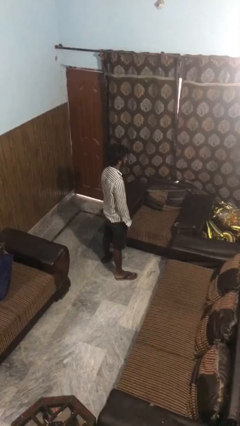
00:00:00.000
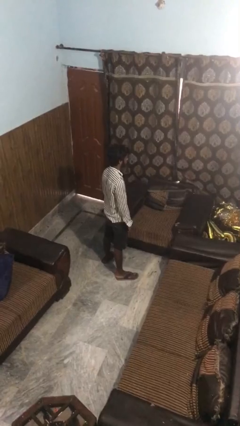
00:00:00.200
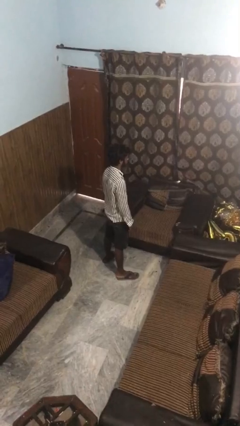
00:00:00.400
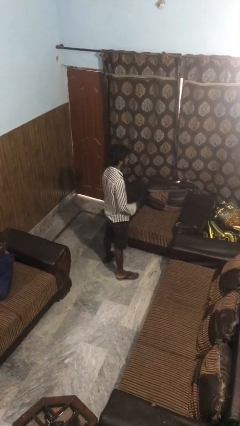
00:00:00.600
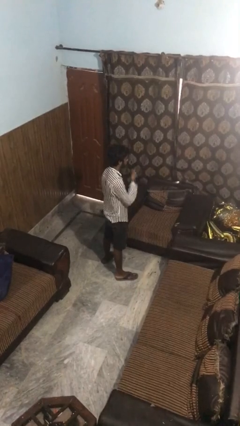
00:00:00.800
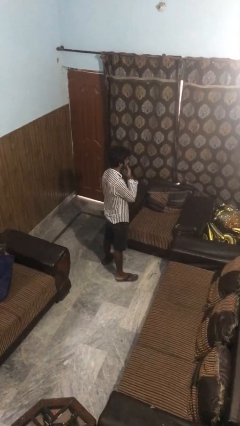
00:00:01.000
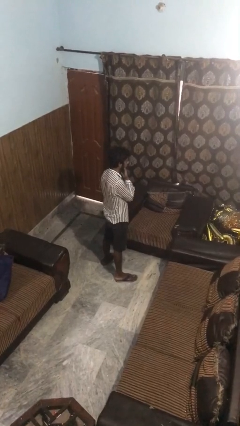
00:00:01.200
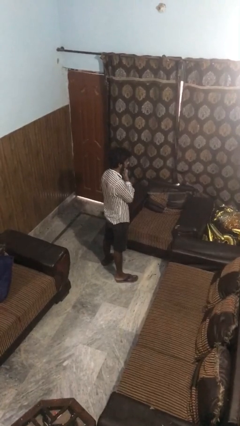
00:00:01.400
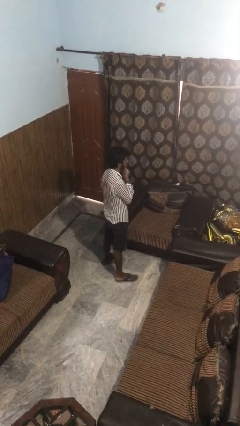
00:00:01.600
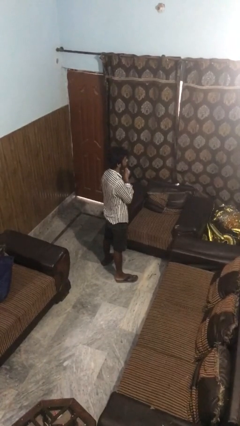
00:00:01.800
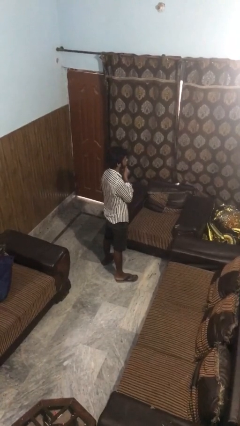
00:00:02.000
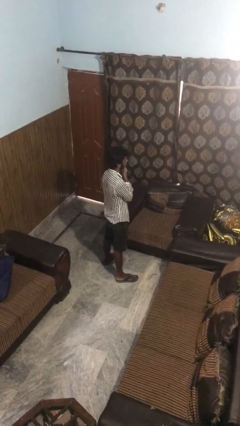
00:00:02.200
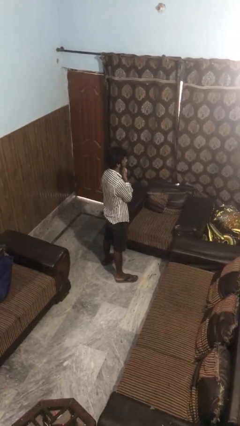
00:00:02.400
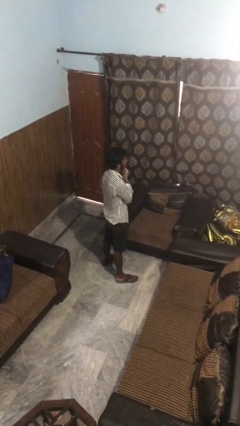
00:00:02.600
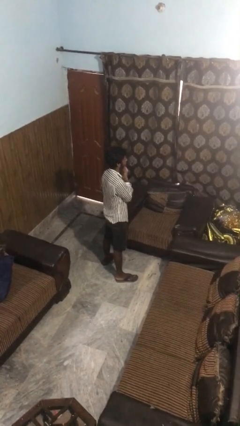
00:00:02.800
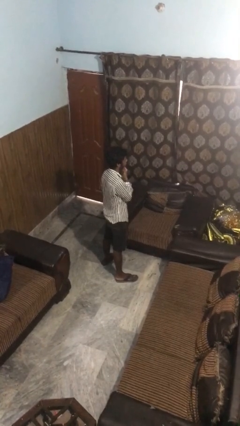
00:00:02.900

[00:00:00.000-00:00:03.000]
person strokes chin

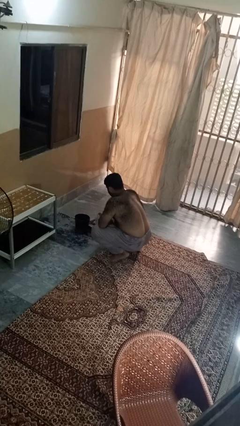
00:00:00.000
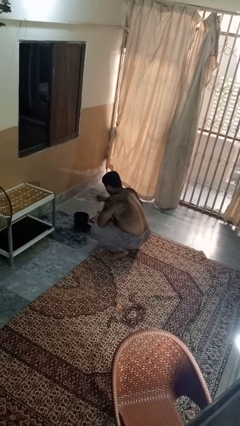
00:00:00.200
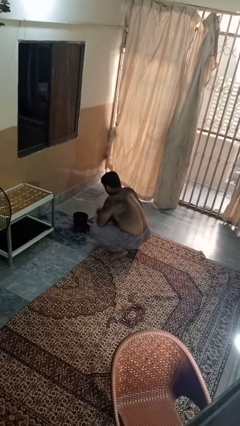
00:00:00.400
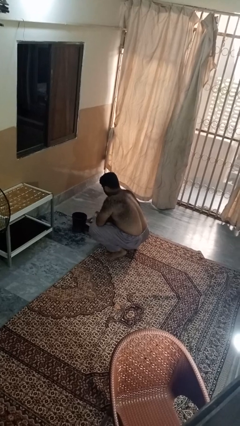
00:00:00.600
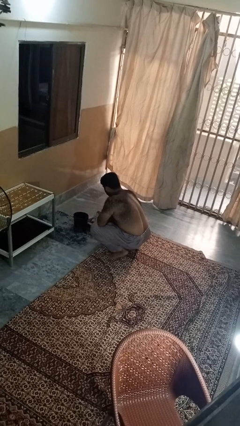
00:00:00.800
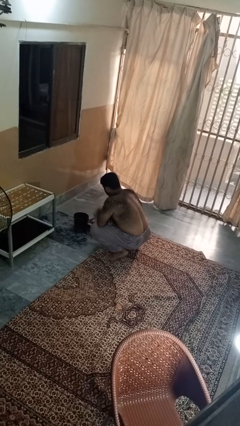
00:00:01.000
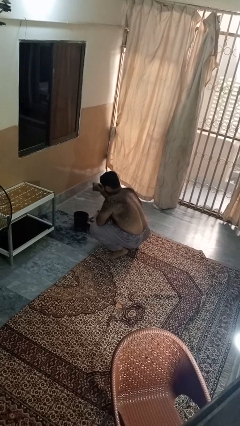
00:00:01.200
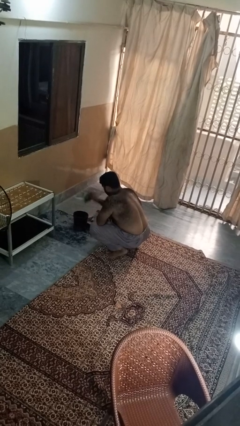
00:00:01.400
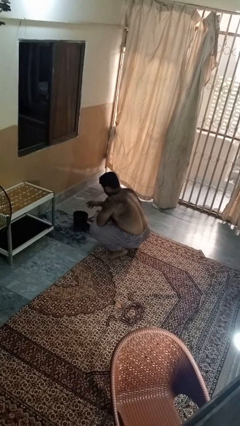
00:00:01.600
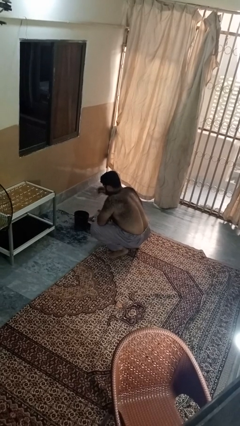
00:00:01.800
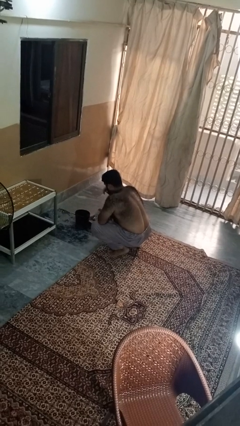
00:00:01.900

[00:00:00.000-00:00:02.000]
person discards trash

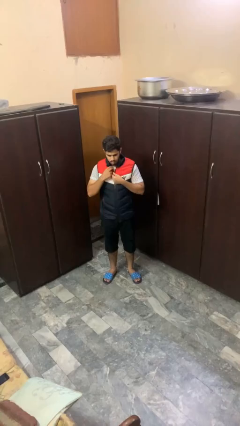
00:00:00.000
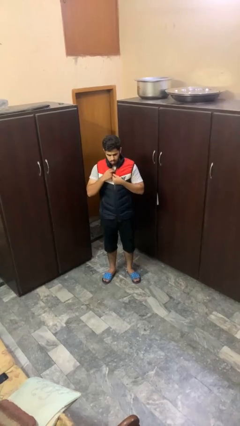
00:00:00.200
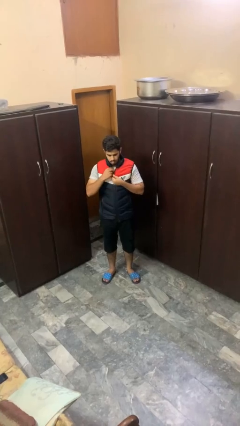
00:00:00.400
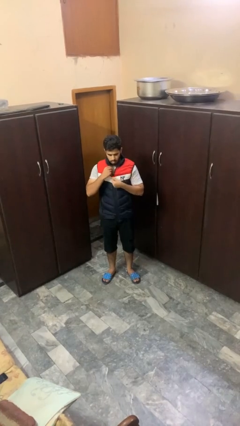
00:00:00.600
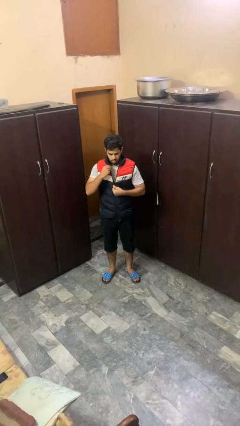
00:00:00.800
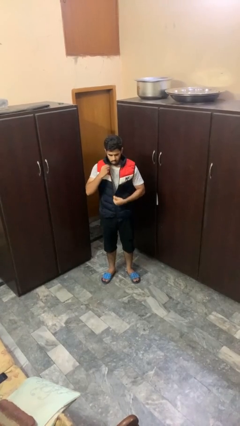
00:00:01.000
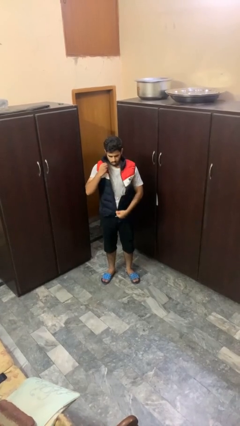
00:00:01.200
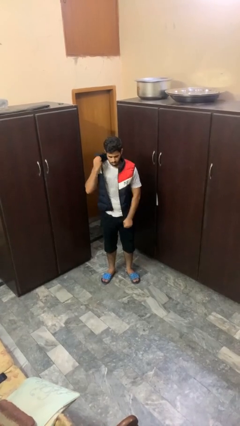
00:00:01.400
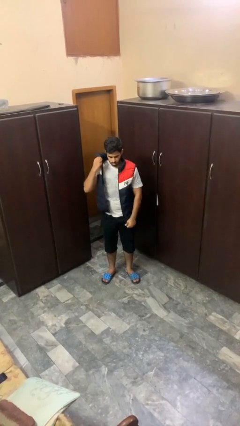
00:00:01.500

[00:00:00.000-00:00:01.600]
person unzips jacket

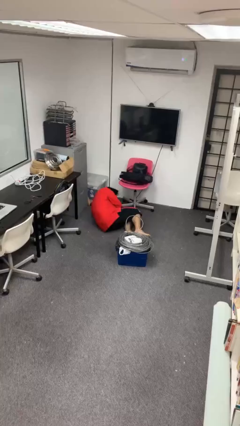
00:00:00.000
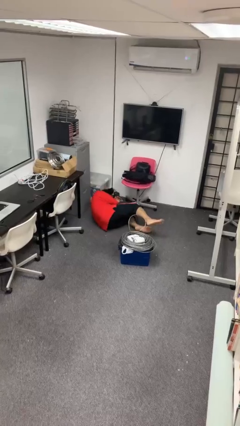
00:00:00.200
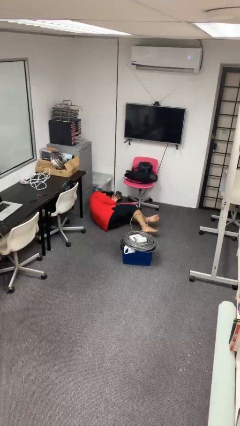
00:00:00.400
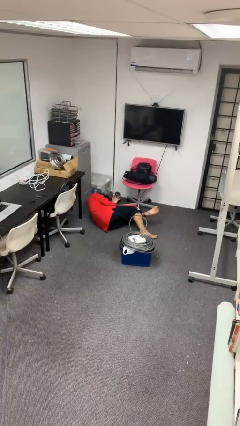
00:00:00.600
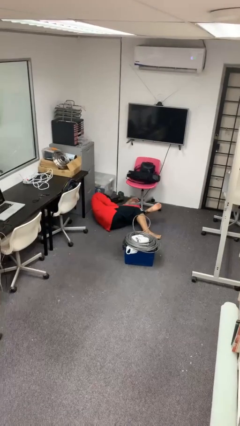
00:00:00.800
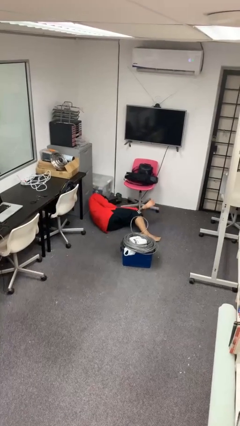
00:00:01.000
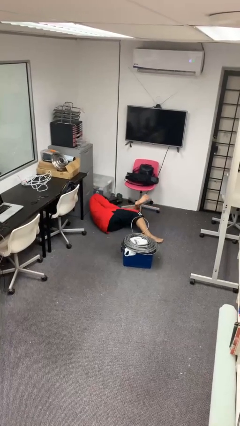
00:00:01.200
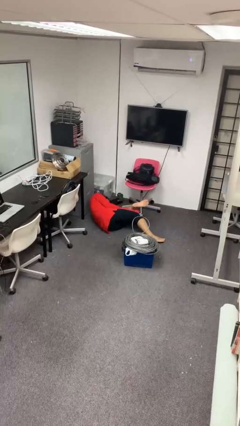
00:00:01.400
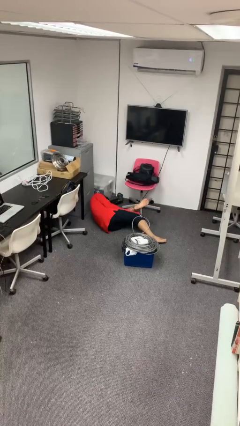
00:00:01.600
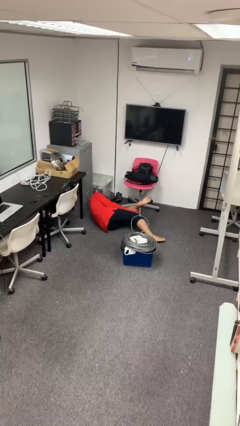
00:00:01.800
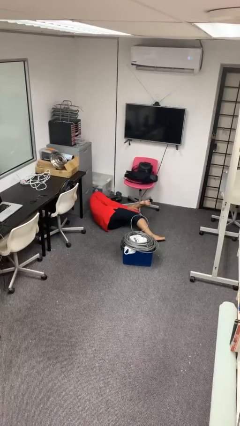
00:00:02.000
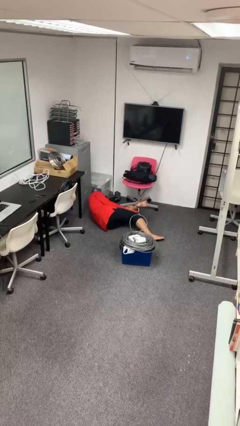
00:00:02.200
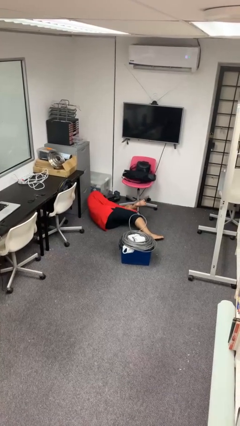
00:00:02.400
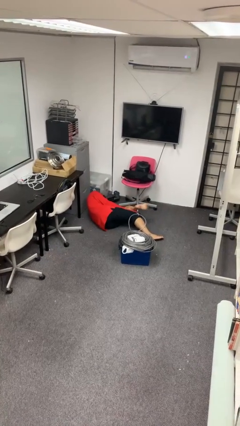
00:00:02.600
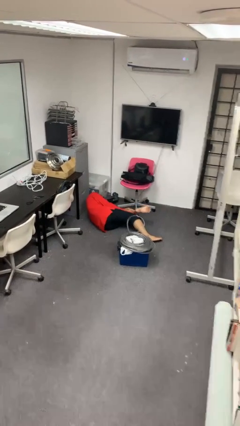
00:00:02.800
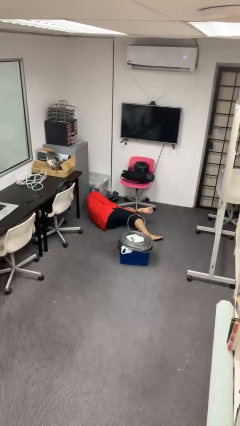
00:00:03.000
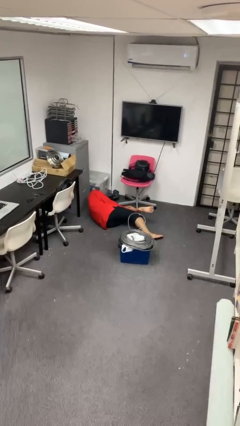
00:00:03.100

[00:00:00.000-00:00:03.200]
person lies down on floor

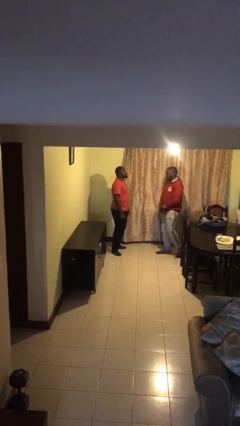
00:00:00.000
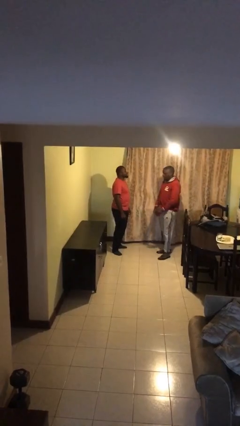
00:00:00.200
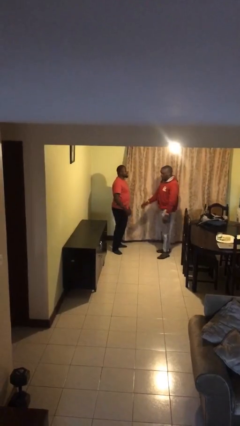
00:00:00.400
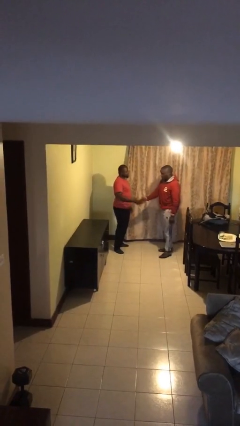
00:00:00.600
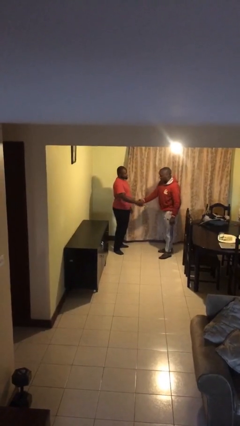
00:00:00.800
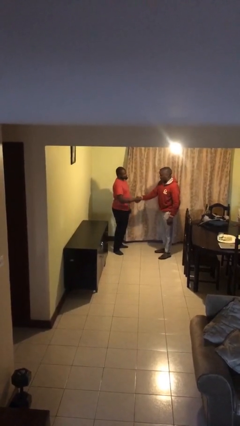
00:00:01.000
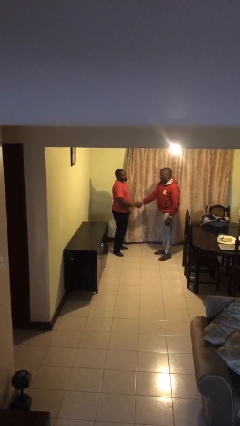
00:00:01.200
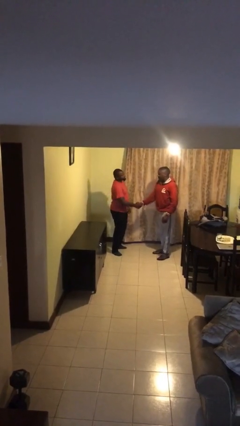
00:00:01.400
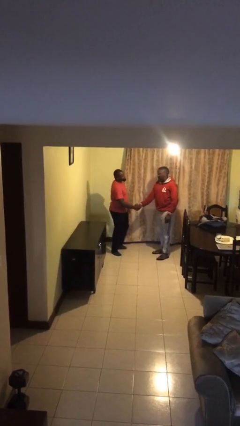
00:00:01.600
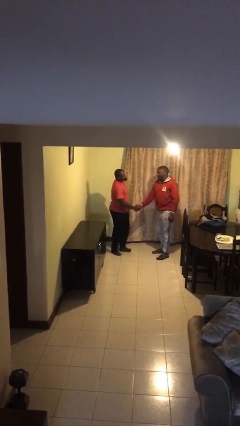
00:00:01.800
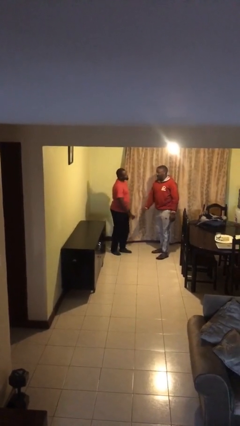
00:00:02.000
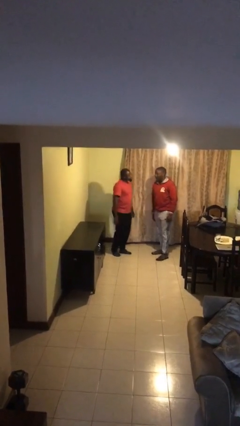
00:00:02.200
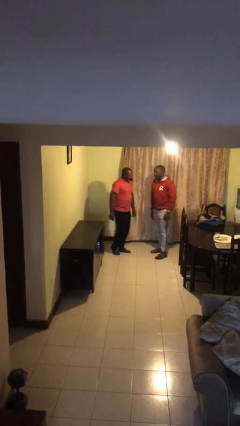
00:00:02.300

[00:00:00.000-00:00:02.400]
person shakes hand

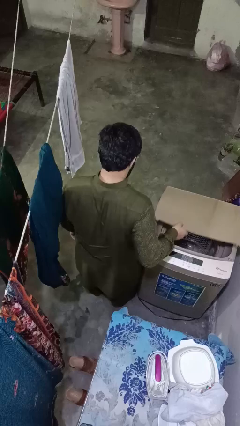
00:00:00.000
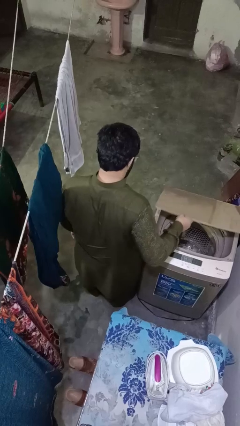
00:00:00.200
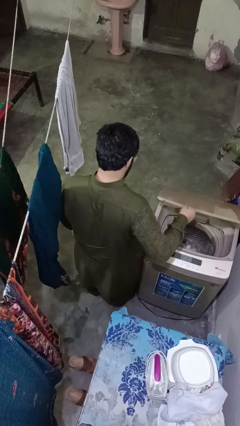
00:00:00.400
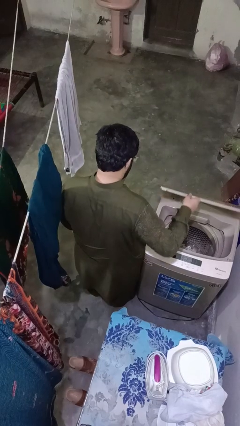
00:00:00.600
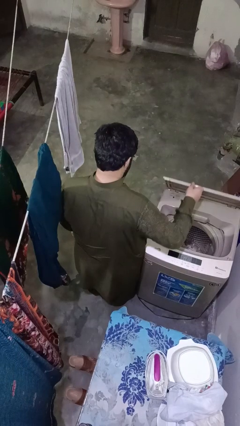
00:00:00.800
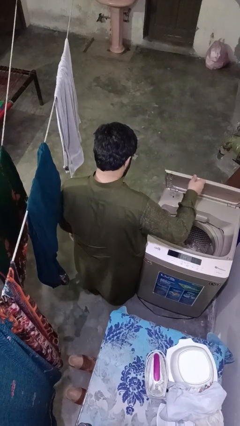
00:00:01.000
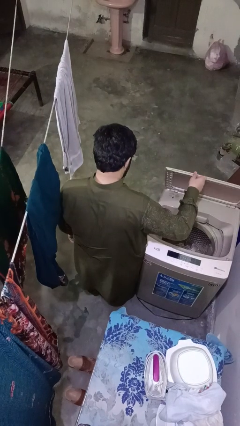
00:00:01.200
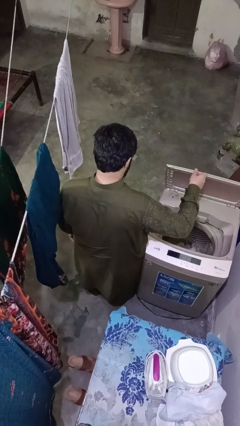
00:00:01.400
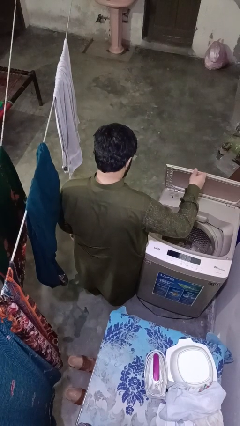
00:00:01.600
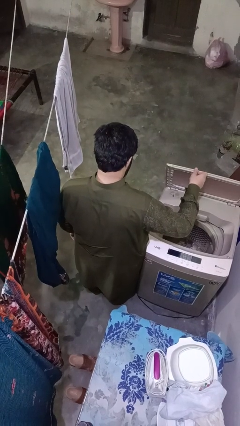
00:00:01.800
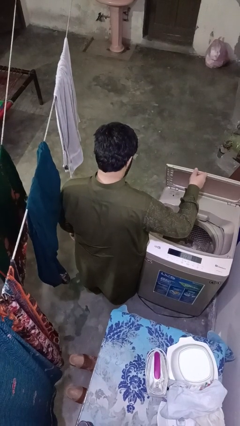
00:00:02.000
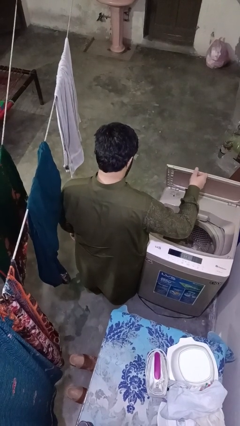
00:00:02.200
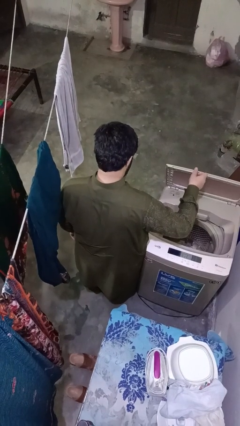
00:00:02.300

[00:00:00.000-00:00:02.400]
person opens clothes washer

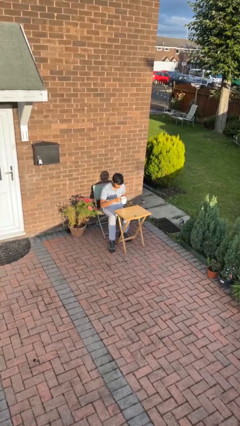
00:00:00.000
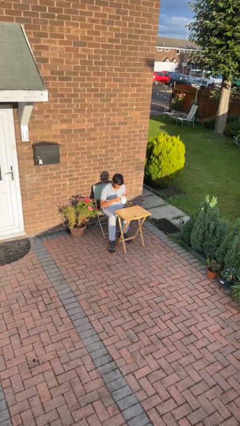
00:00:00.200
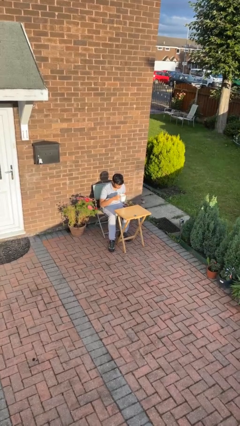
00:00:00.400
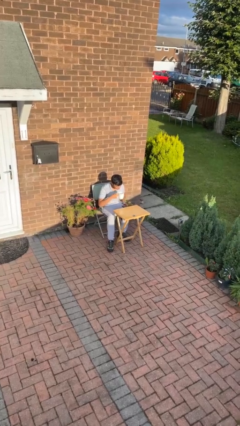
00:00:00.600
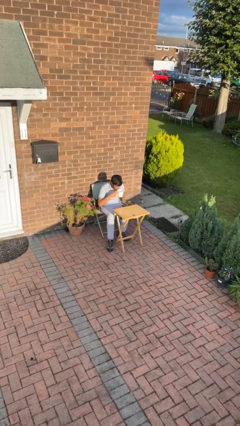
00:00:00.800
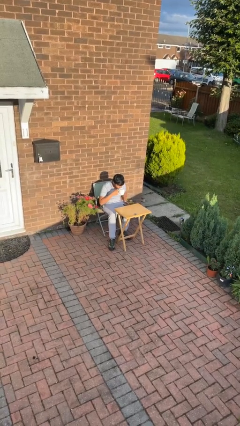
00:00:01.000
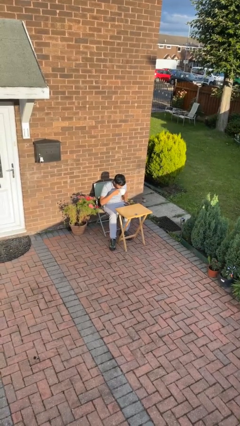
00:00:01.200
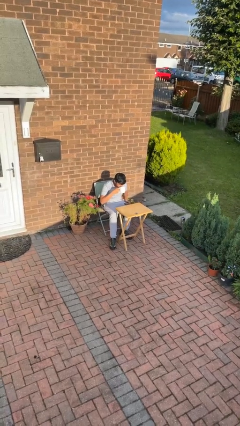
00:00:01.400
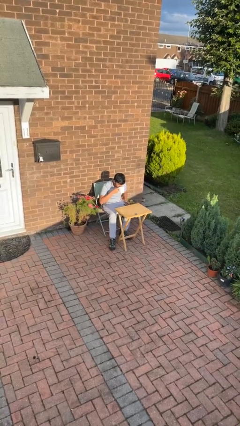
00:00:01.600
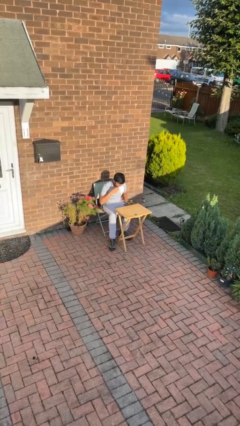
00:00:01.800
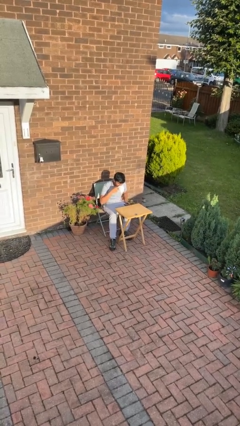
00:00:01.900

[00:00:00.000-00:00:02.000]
person drinks from mug
